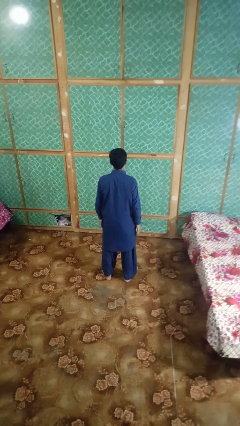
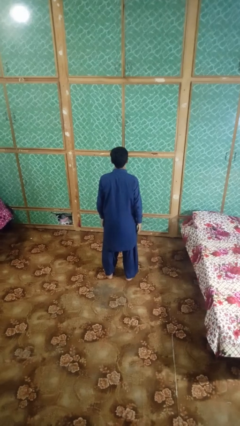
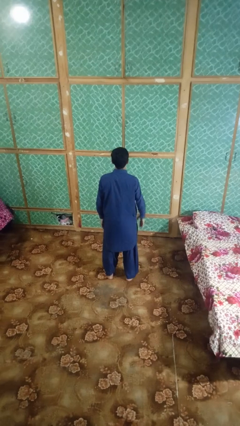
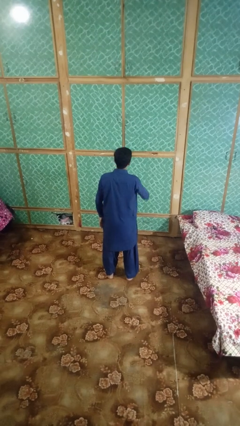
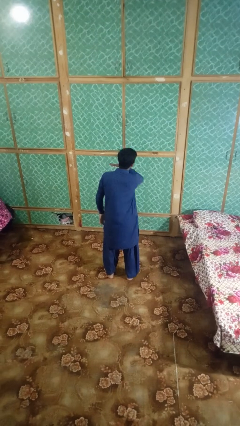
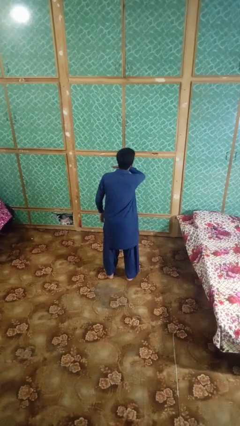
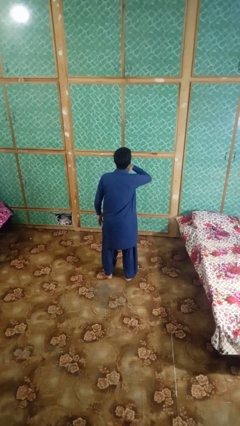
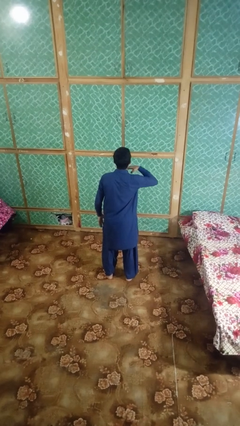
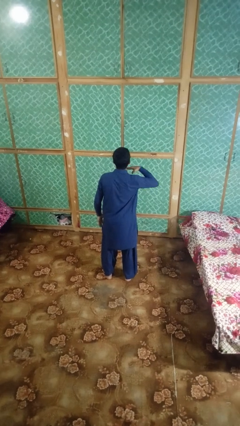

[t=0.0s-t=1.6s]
person gestures cut

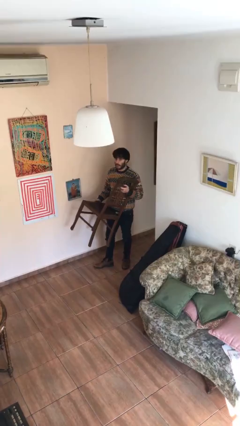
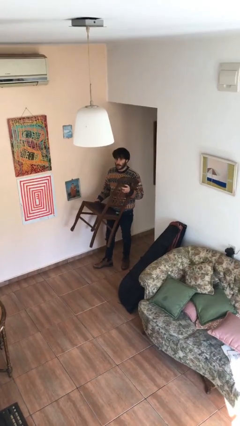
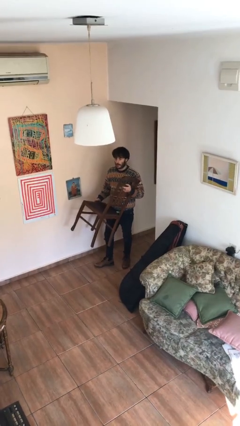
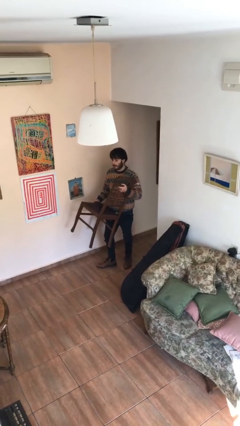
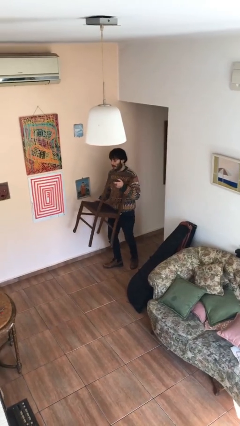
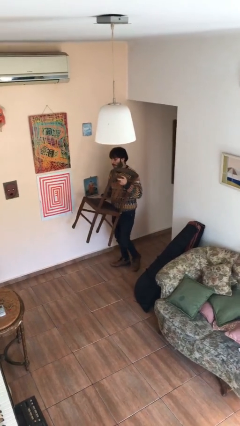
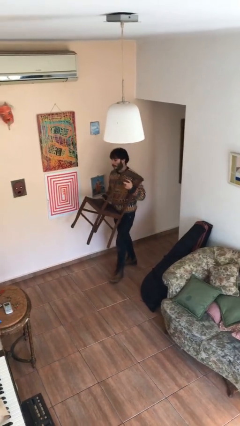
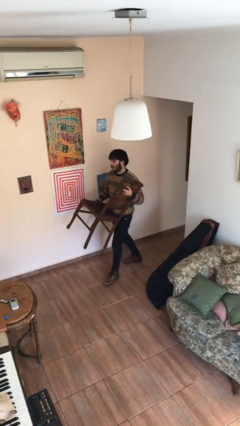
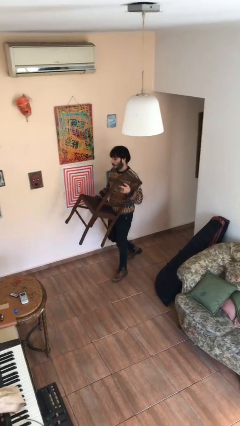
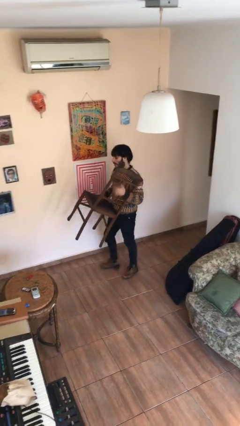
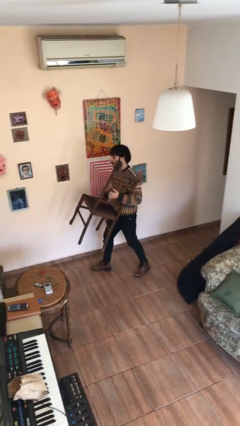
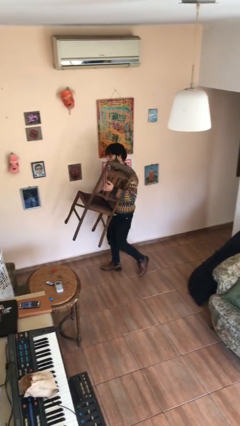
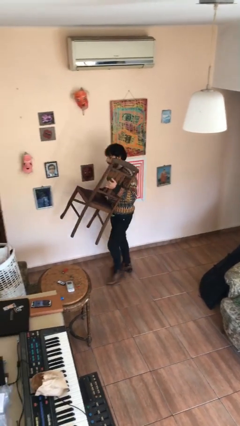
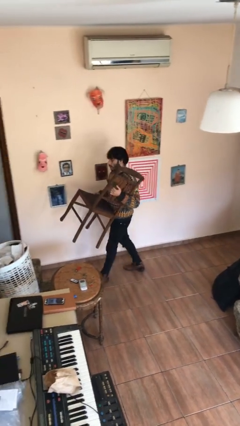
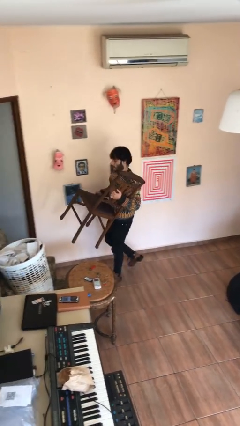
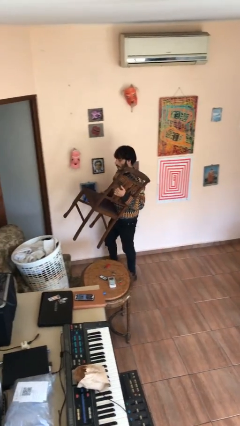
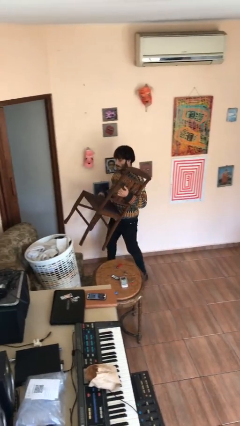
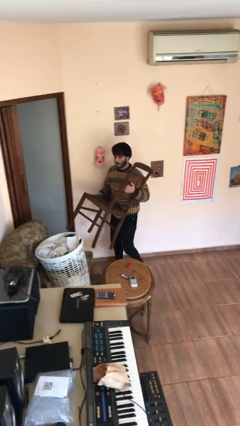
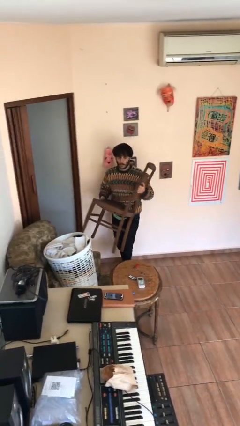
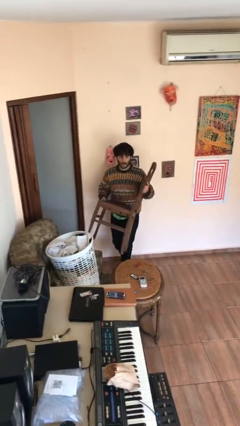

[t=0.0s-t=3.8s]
person carries furniture

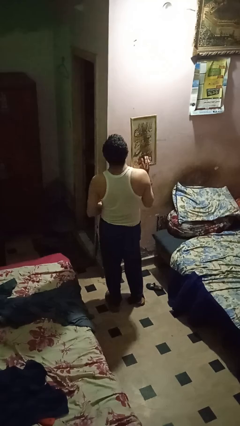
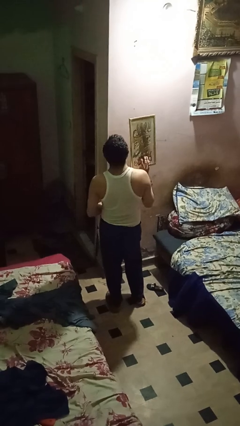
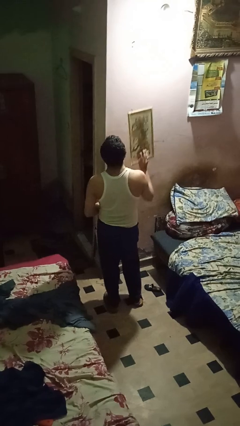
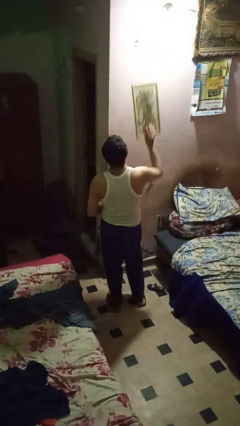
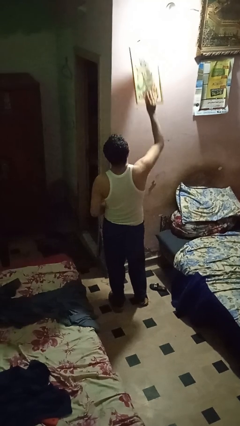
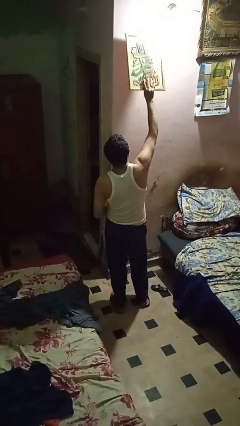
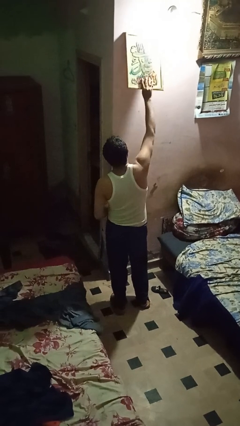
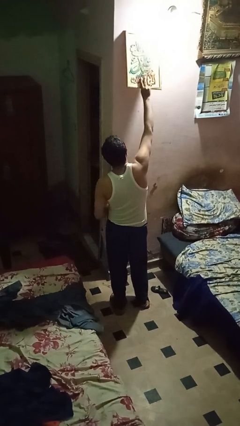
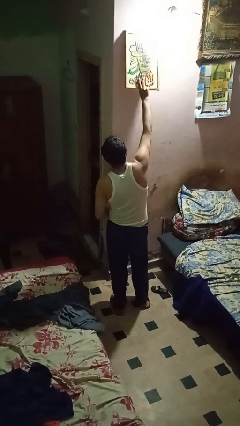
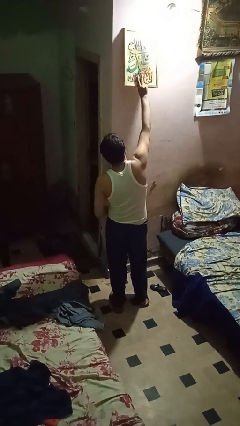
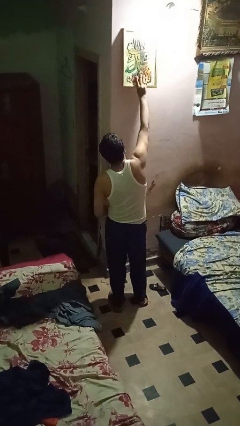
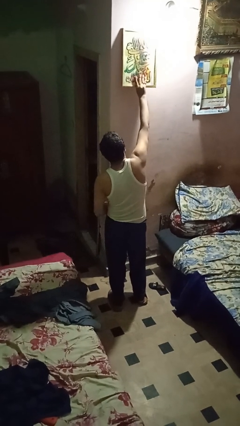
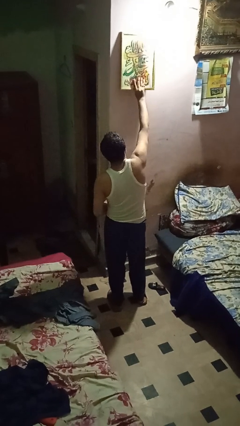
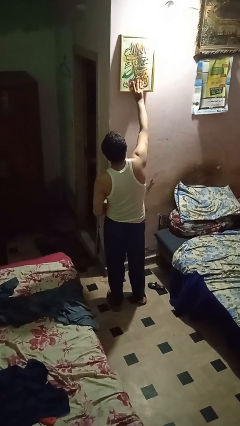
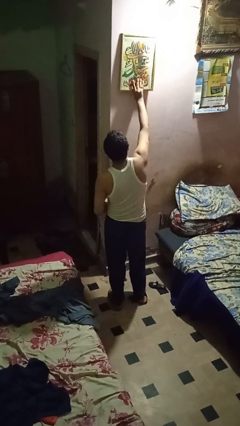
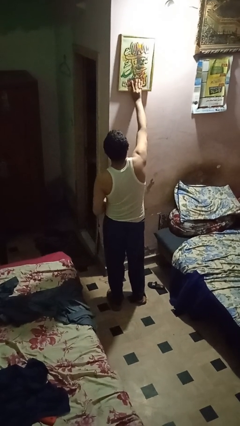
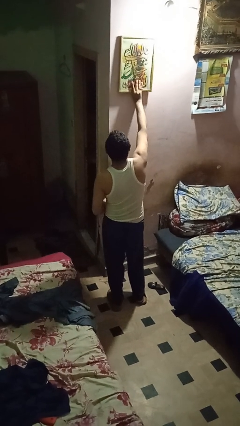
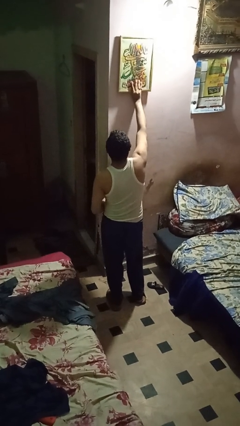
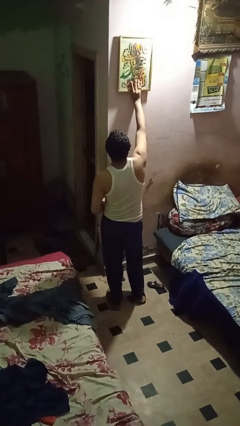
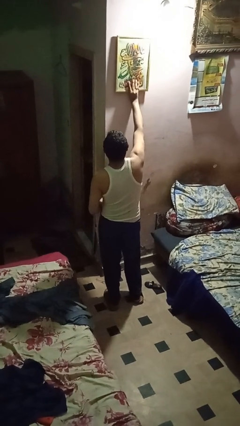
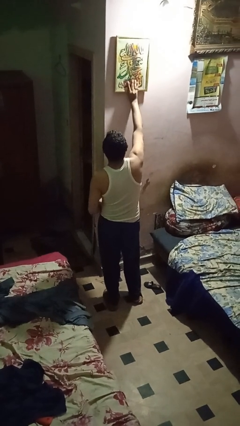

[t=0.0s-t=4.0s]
person puts up picture frame

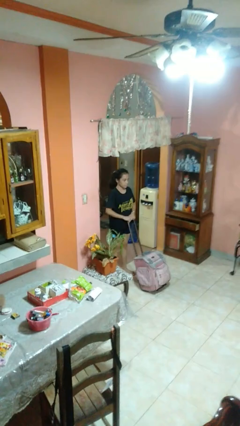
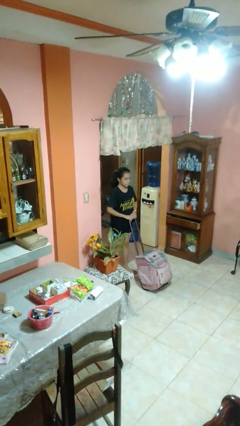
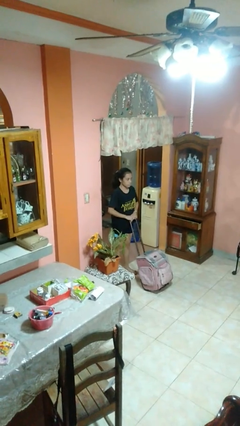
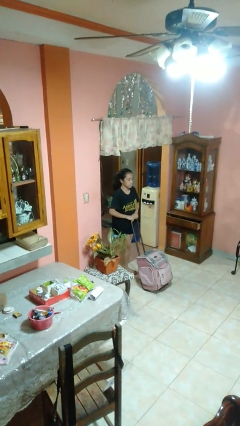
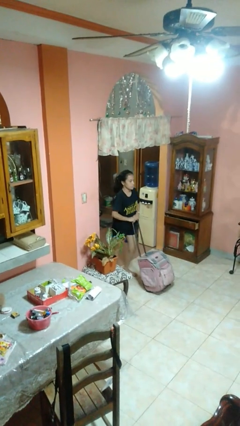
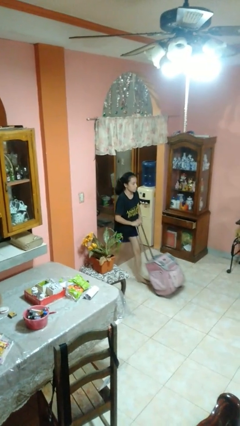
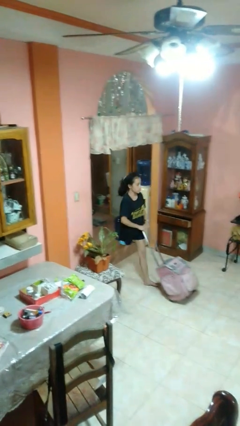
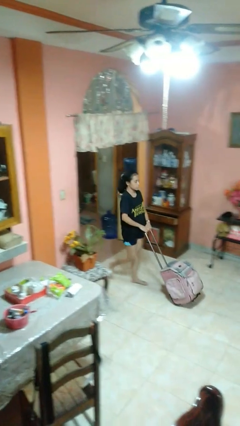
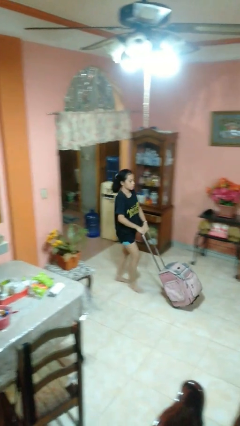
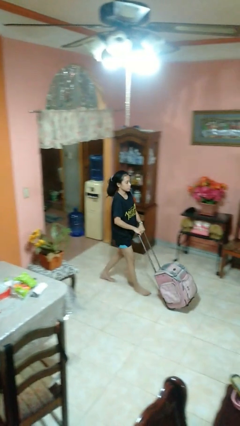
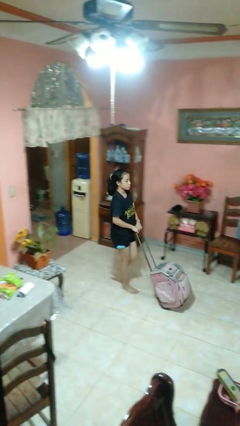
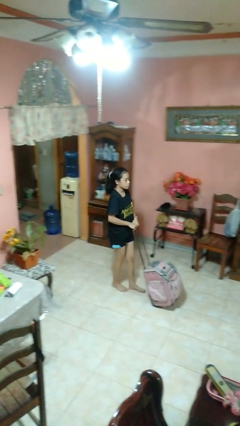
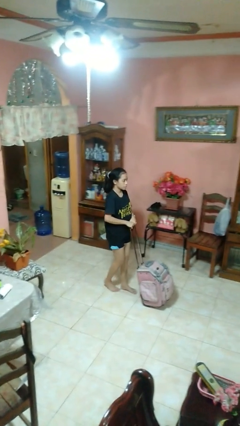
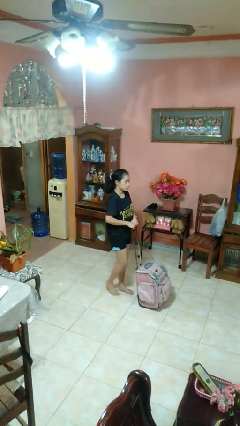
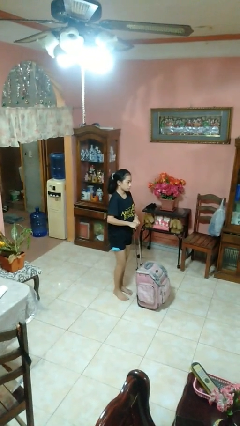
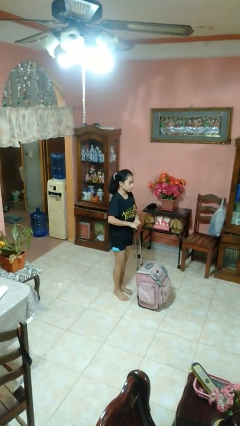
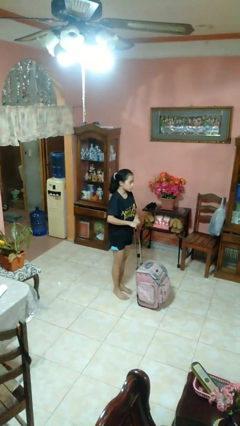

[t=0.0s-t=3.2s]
person pushes wheeled cart

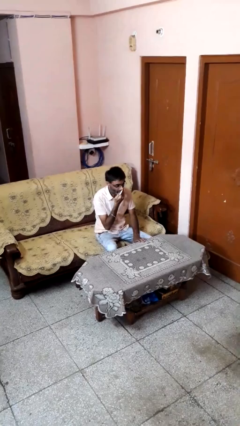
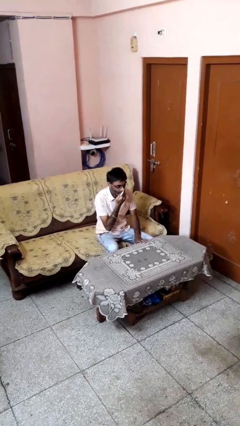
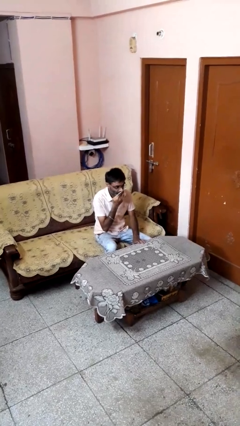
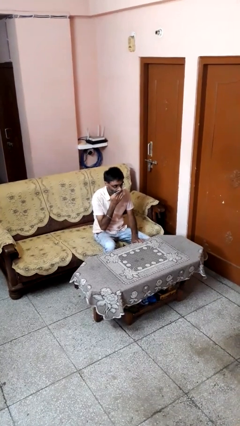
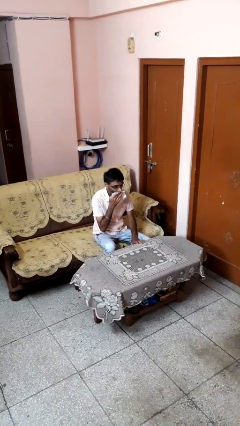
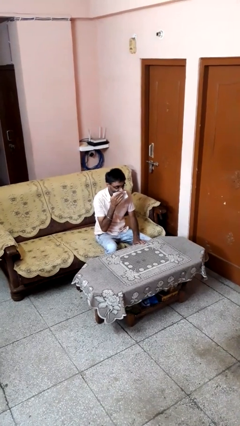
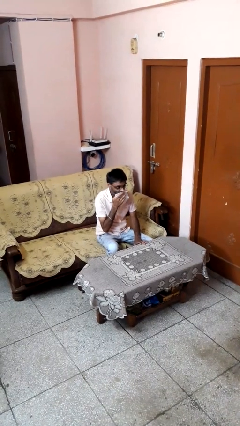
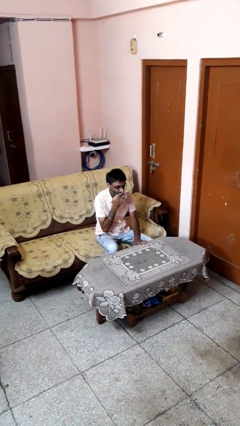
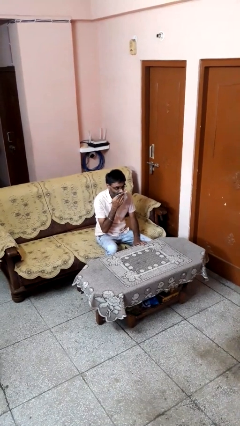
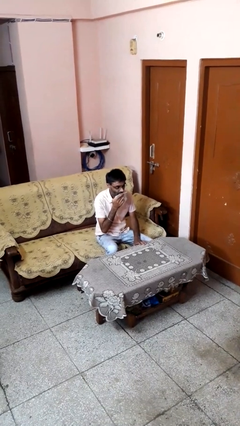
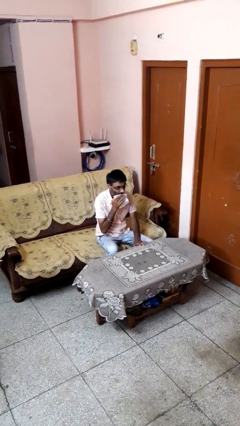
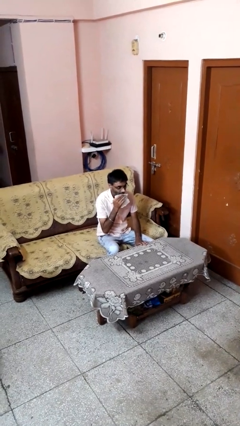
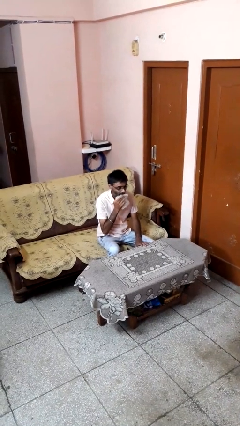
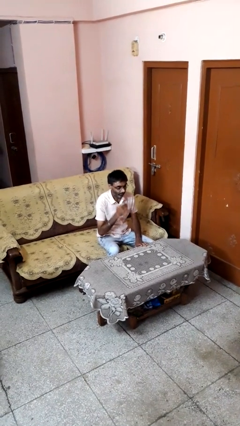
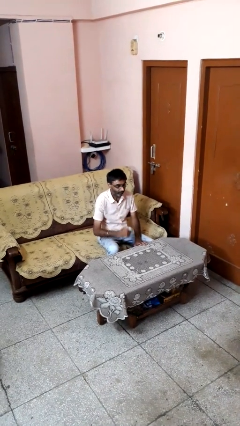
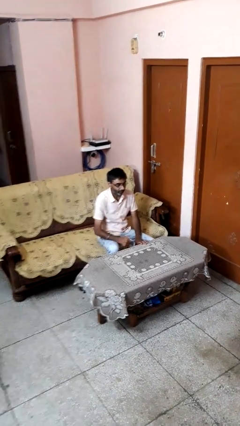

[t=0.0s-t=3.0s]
person wipes mouth with napkin

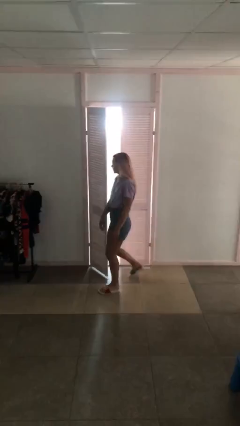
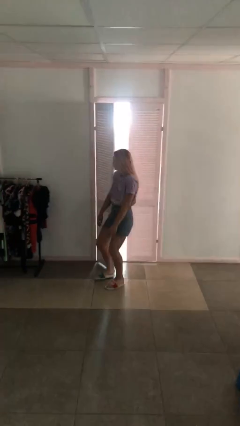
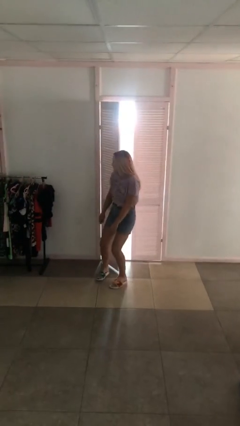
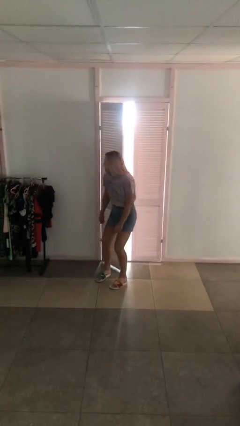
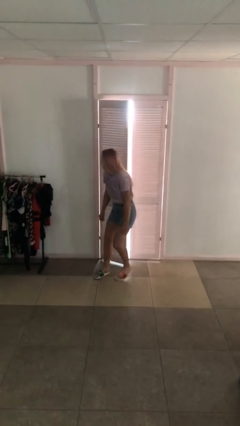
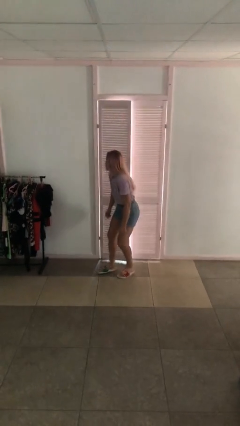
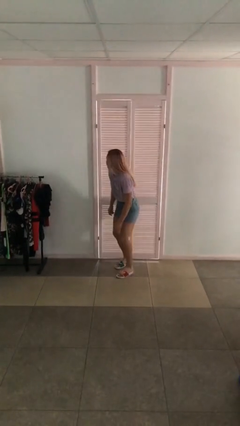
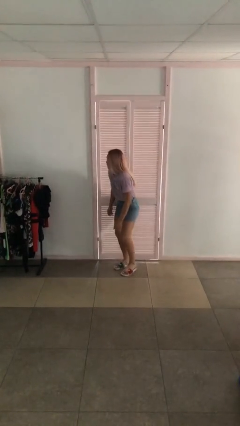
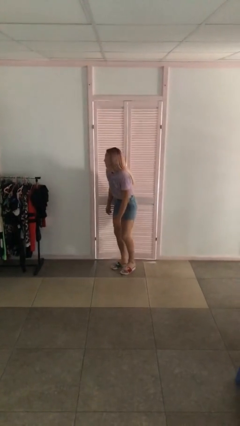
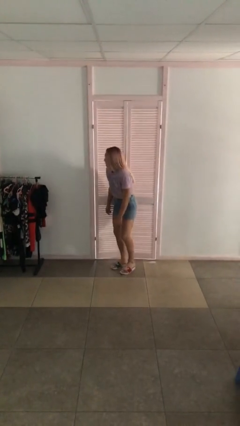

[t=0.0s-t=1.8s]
person closes door with hip

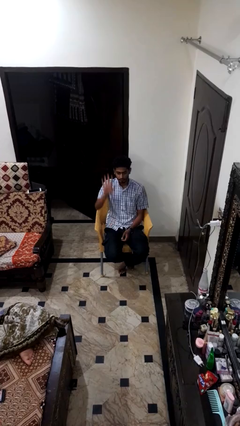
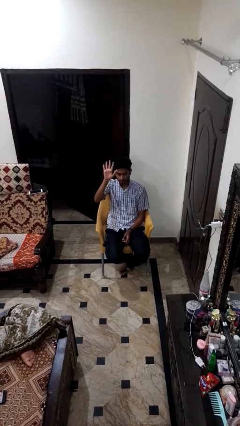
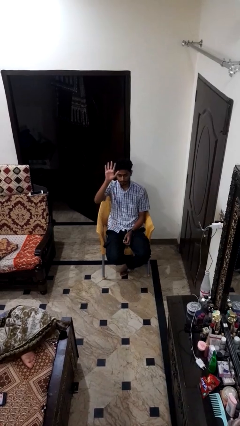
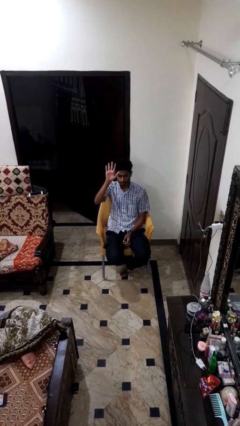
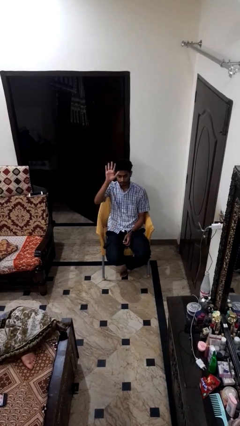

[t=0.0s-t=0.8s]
person gestures raise hand
